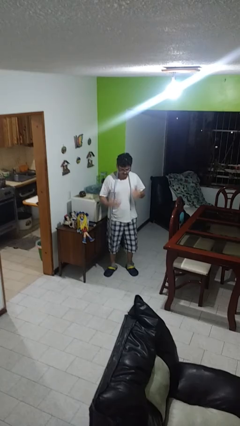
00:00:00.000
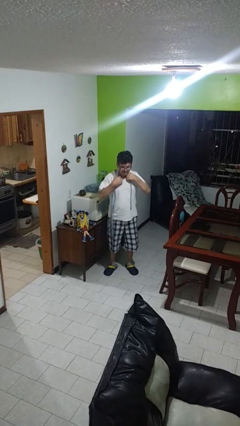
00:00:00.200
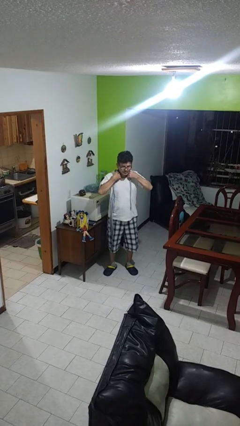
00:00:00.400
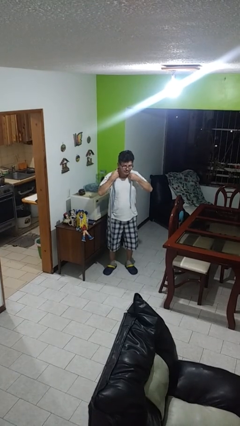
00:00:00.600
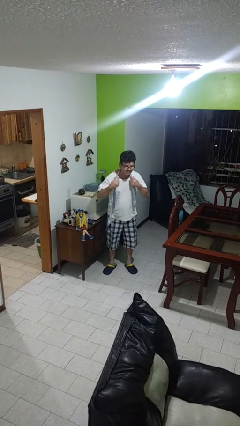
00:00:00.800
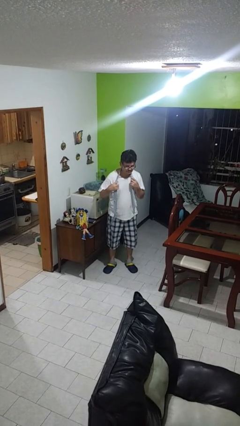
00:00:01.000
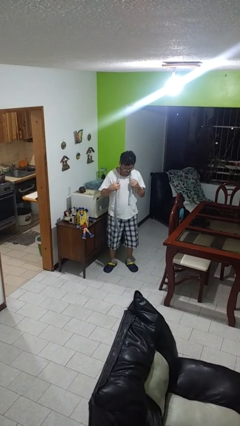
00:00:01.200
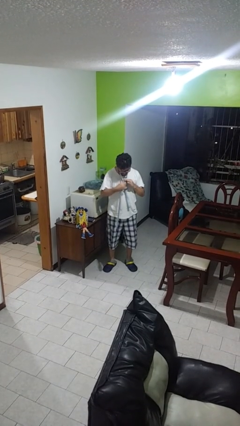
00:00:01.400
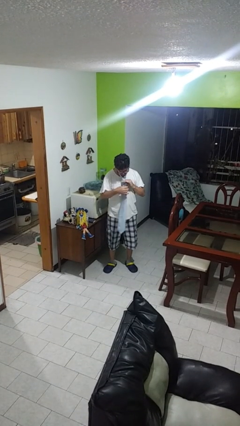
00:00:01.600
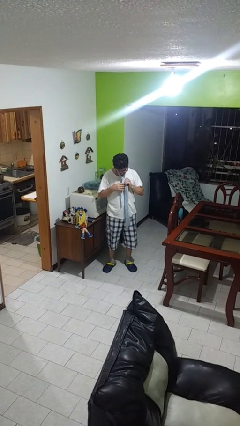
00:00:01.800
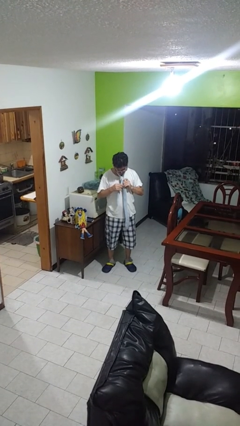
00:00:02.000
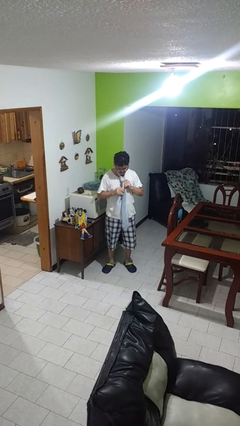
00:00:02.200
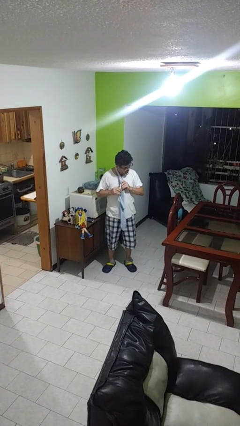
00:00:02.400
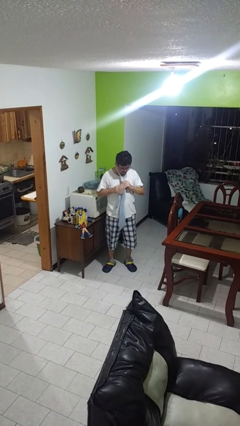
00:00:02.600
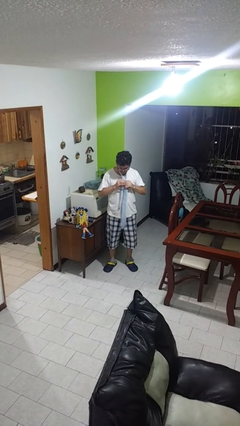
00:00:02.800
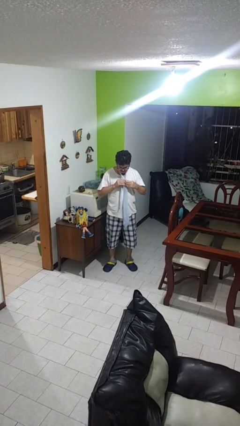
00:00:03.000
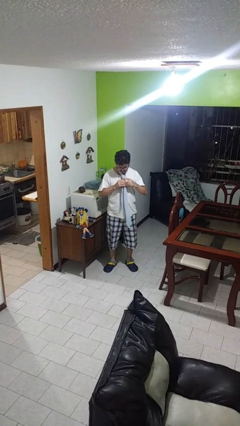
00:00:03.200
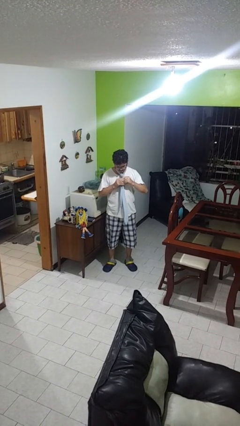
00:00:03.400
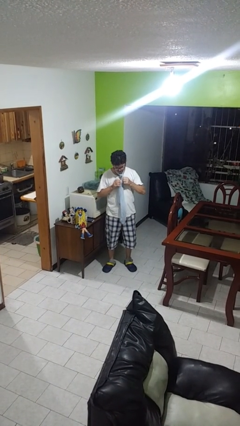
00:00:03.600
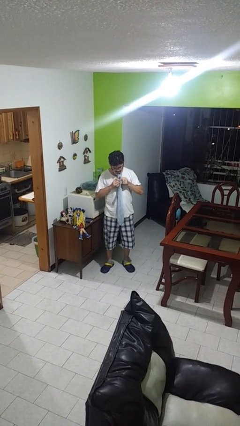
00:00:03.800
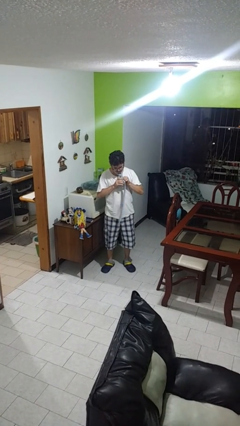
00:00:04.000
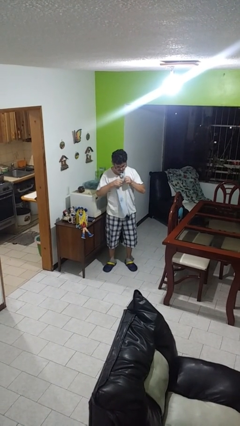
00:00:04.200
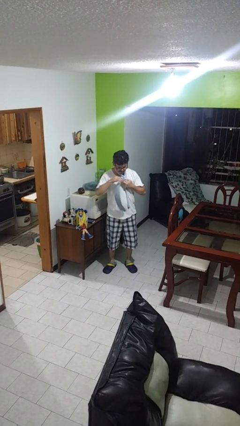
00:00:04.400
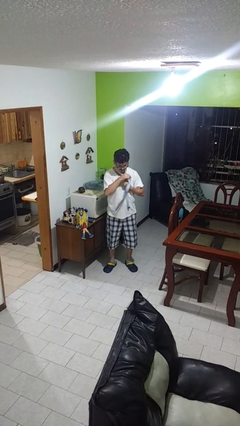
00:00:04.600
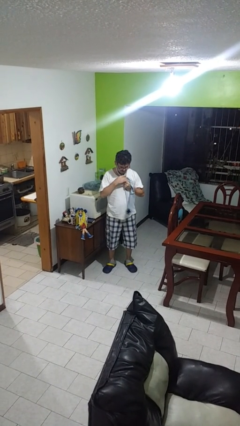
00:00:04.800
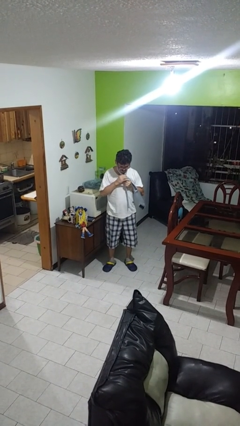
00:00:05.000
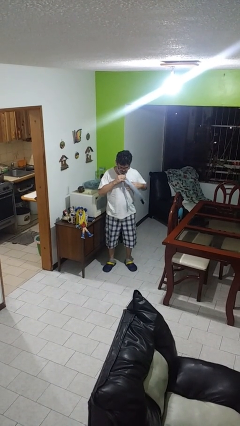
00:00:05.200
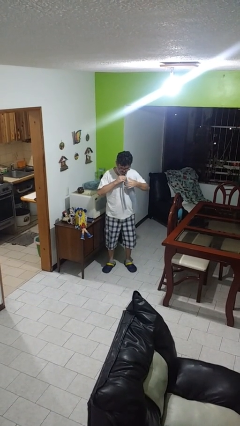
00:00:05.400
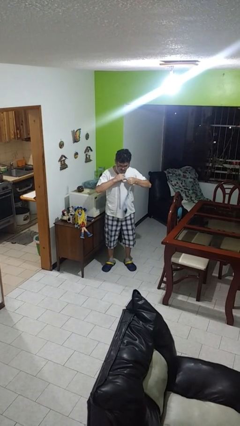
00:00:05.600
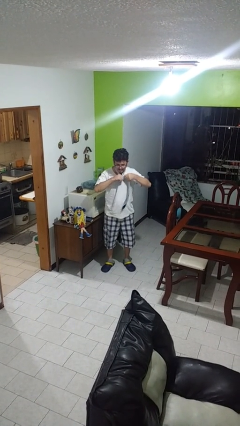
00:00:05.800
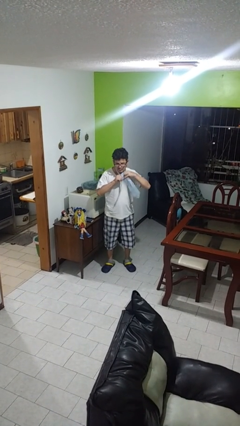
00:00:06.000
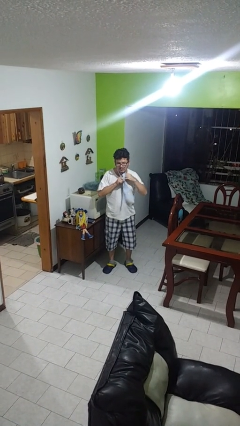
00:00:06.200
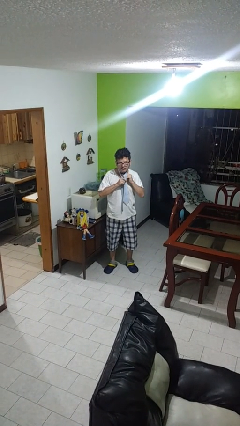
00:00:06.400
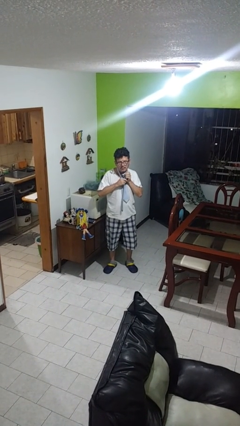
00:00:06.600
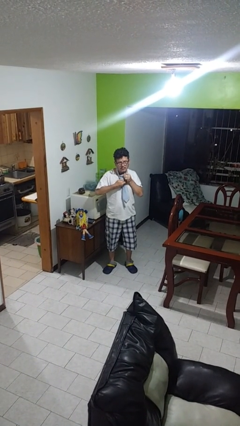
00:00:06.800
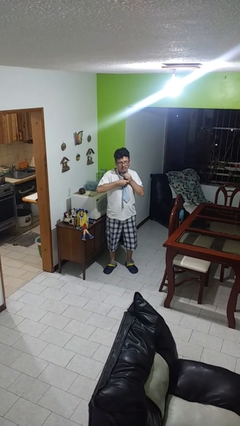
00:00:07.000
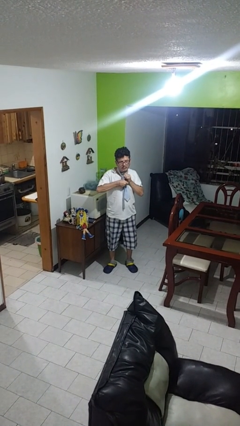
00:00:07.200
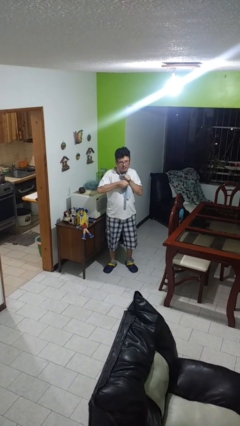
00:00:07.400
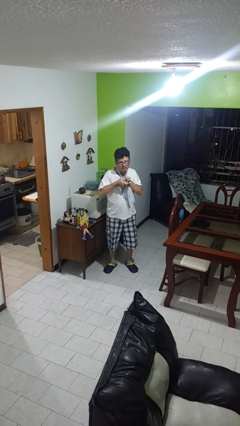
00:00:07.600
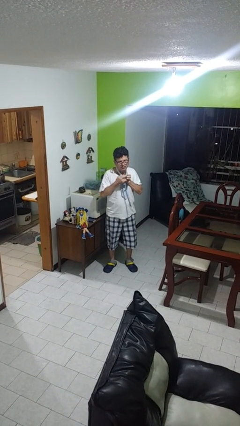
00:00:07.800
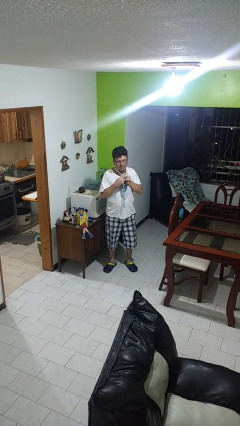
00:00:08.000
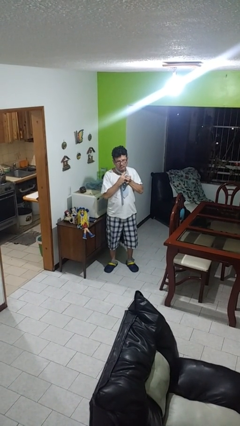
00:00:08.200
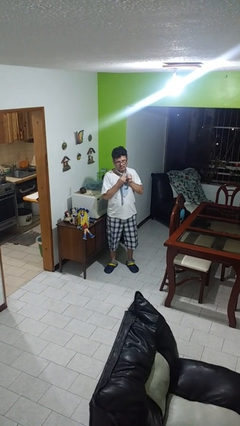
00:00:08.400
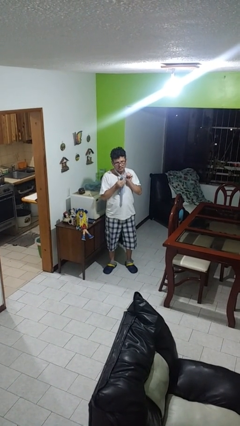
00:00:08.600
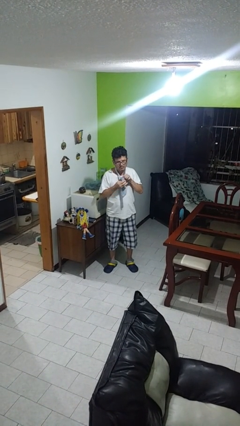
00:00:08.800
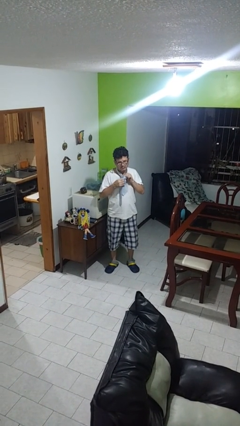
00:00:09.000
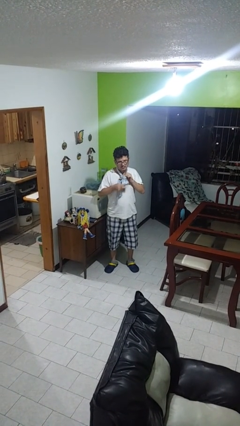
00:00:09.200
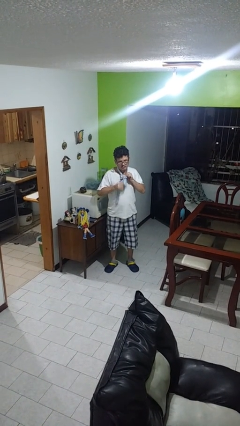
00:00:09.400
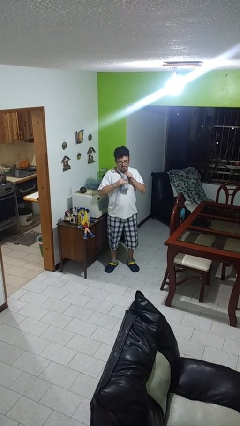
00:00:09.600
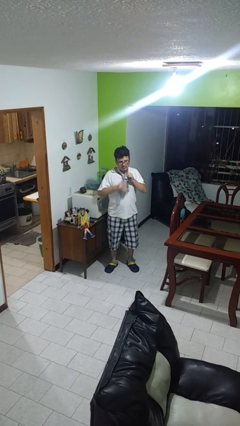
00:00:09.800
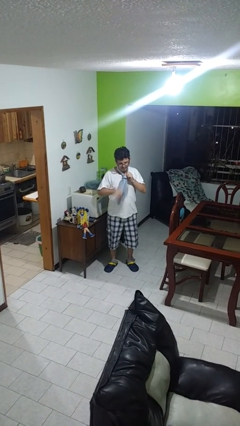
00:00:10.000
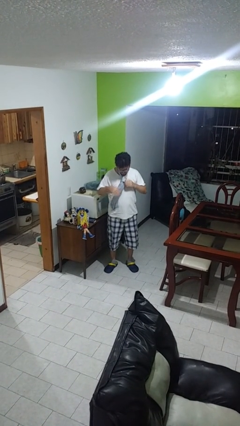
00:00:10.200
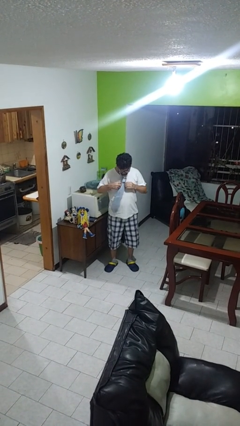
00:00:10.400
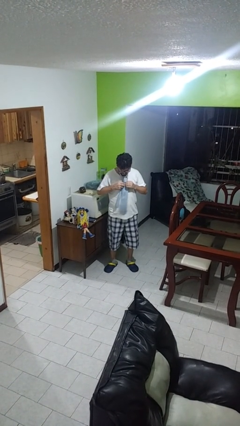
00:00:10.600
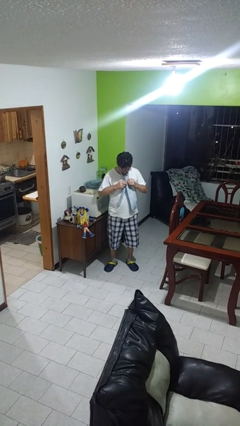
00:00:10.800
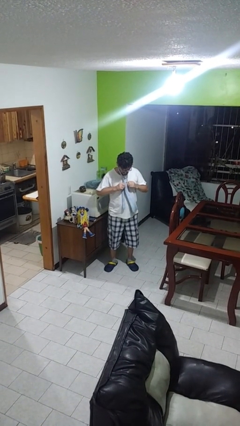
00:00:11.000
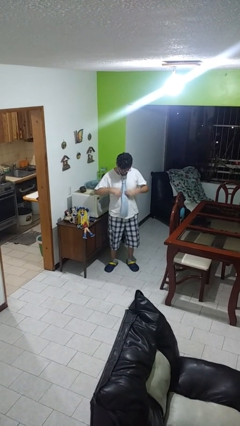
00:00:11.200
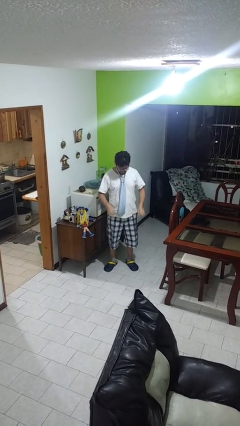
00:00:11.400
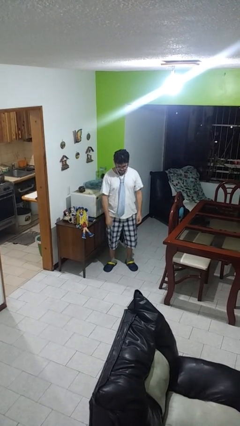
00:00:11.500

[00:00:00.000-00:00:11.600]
person puts on necktie

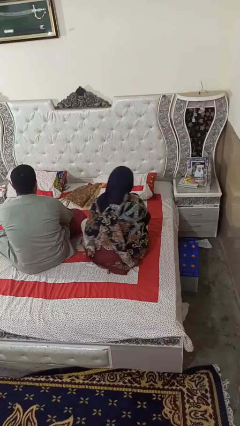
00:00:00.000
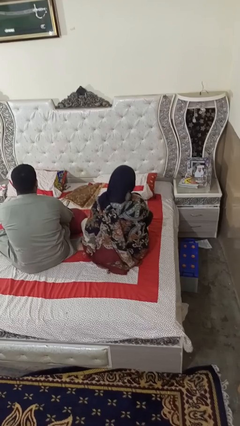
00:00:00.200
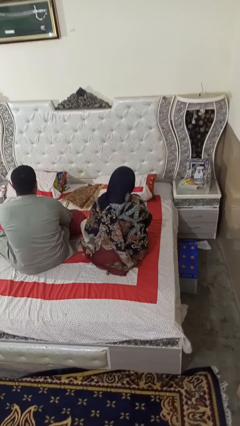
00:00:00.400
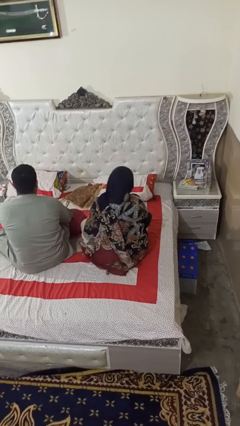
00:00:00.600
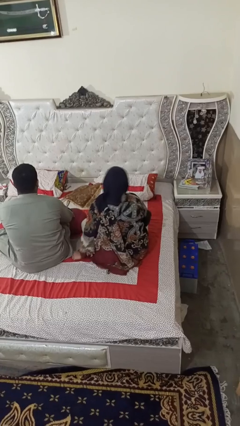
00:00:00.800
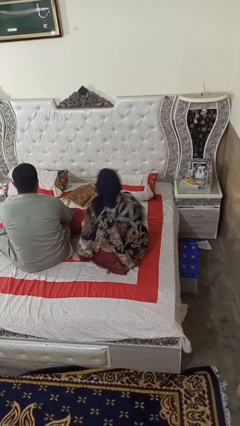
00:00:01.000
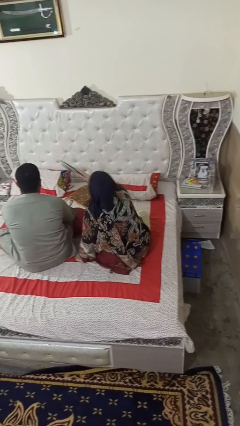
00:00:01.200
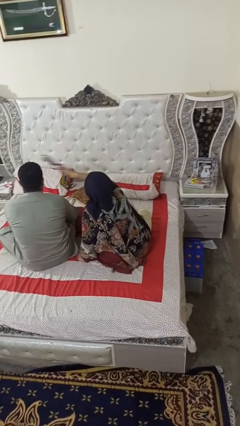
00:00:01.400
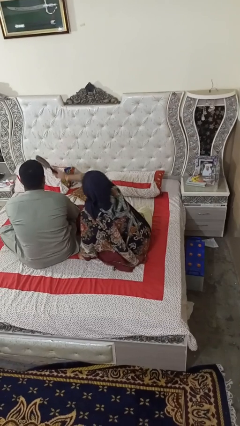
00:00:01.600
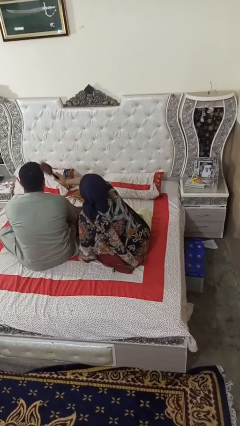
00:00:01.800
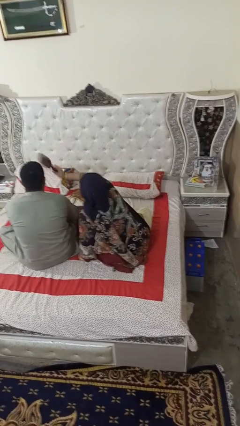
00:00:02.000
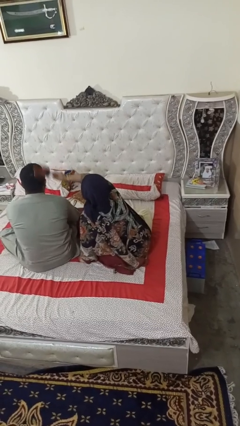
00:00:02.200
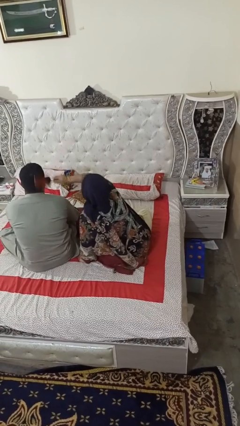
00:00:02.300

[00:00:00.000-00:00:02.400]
person brushes hair of person

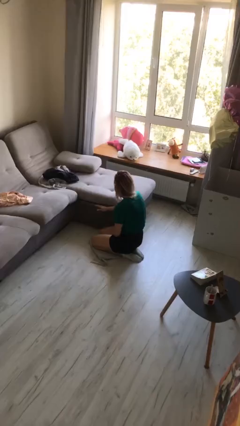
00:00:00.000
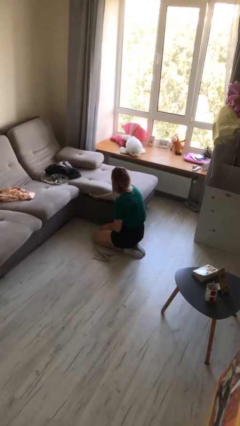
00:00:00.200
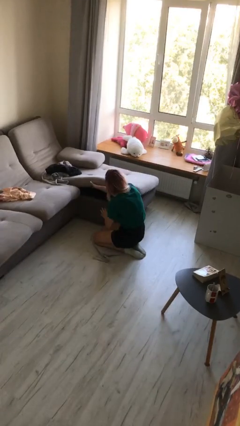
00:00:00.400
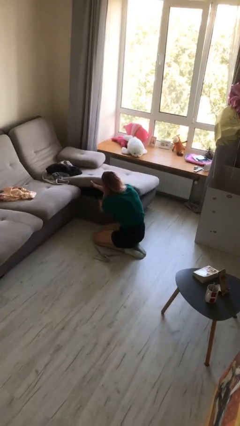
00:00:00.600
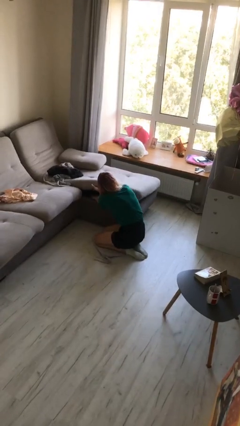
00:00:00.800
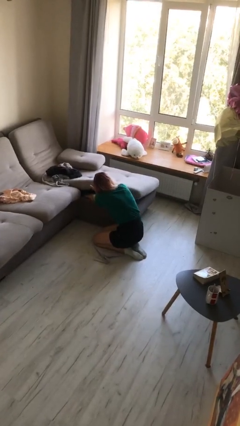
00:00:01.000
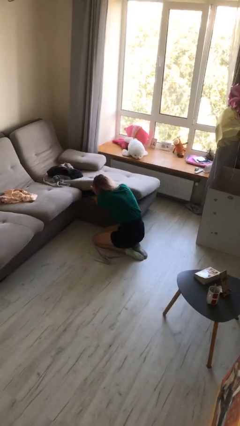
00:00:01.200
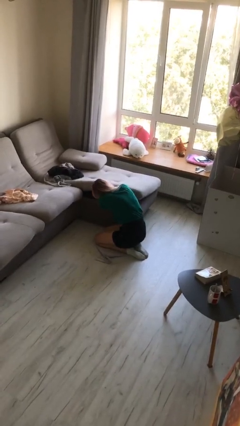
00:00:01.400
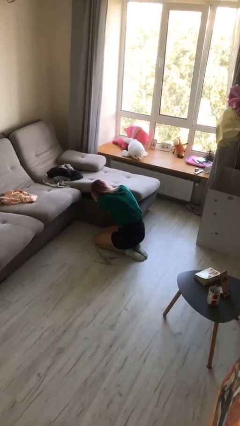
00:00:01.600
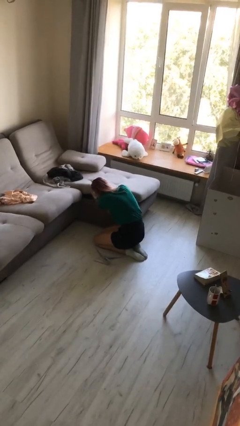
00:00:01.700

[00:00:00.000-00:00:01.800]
person searches under couch

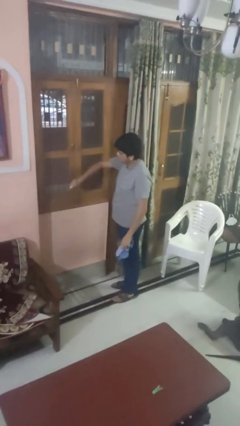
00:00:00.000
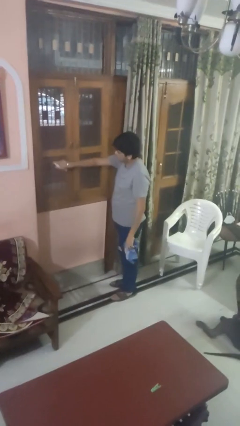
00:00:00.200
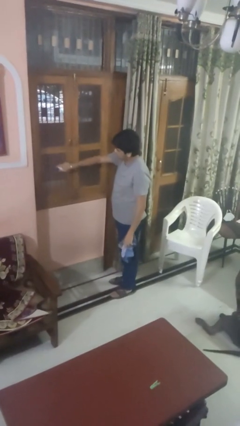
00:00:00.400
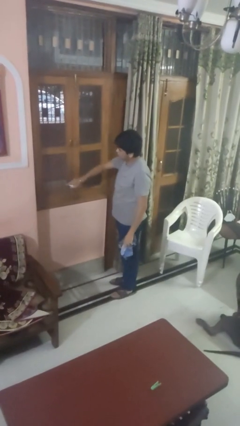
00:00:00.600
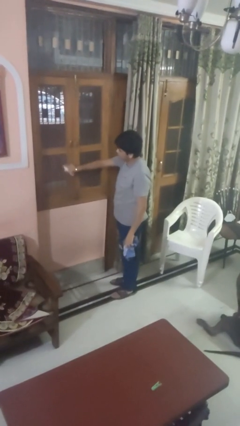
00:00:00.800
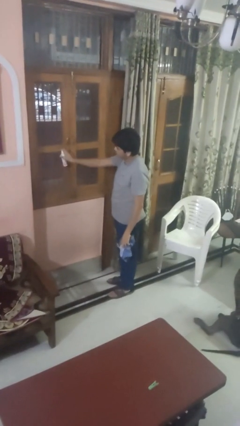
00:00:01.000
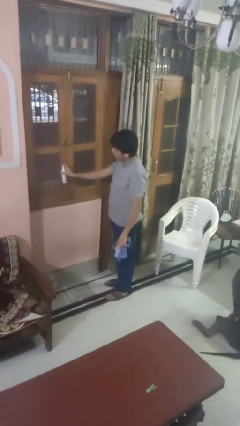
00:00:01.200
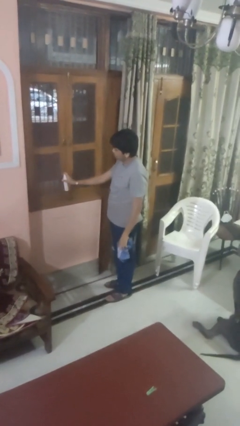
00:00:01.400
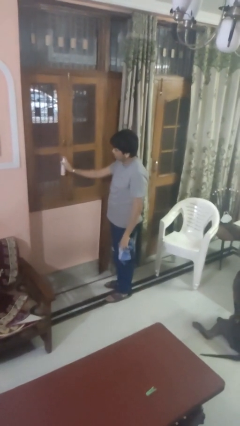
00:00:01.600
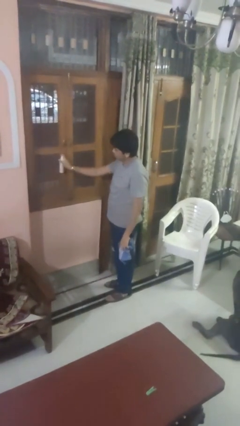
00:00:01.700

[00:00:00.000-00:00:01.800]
person sprays from bottle
